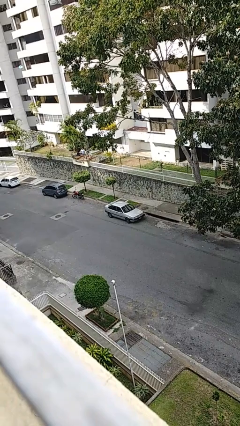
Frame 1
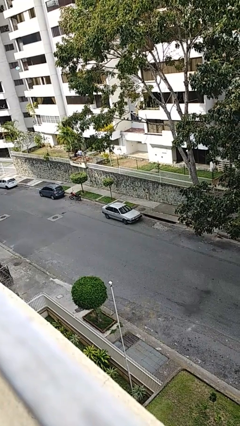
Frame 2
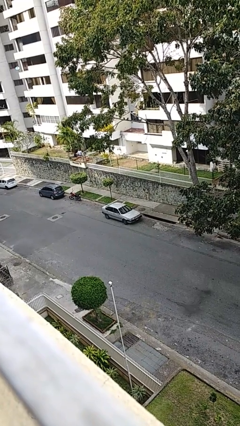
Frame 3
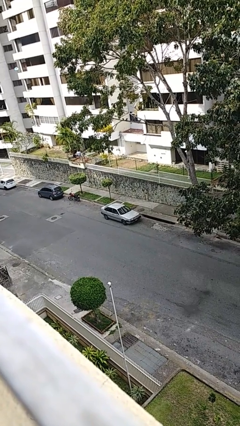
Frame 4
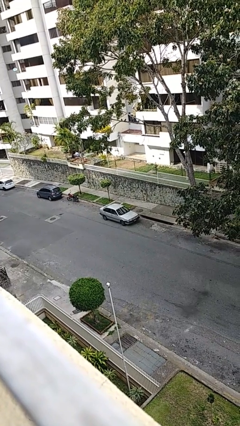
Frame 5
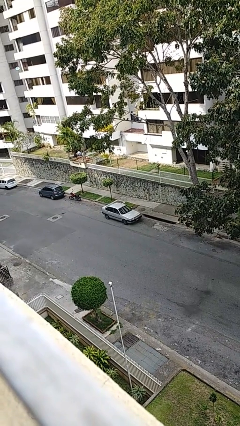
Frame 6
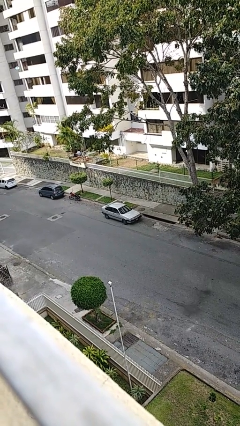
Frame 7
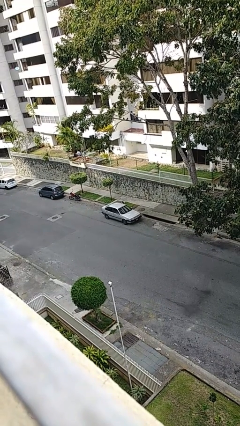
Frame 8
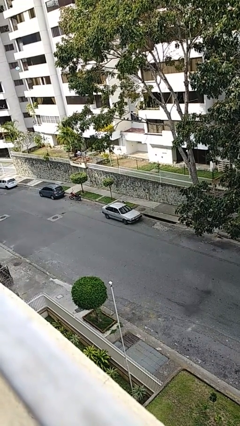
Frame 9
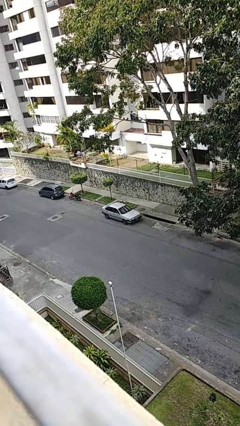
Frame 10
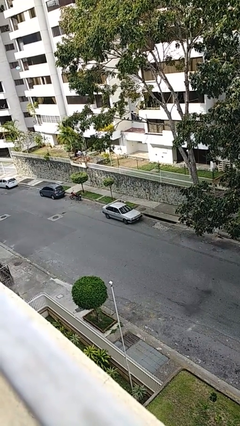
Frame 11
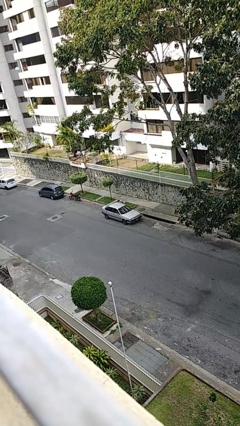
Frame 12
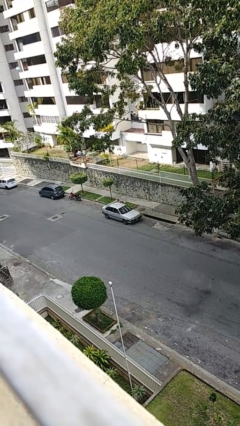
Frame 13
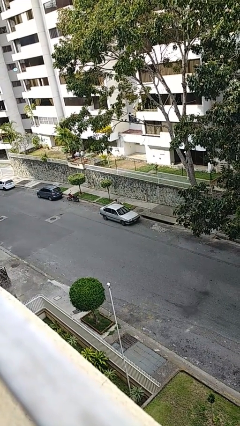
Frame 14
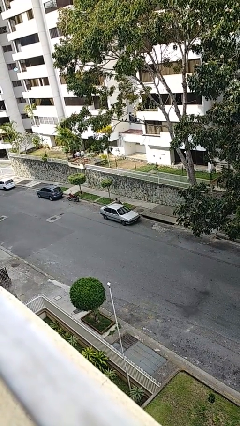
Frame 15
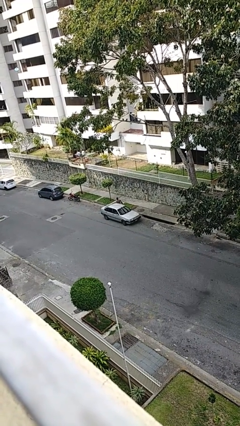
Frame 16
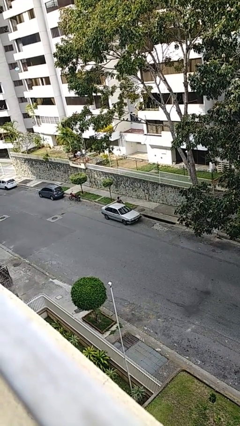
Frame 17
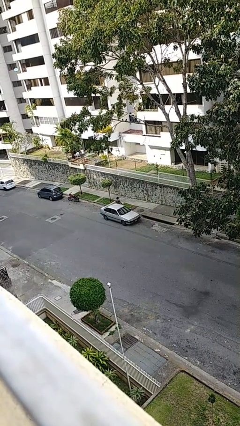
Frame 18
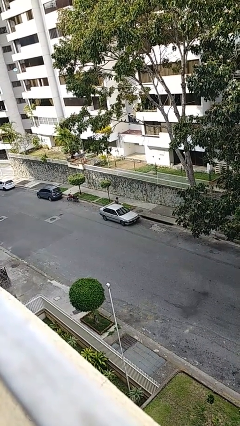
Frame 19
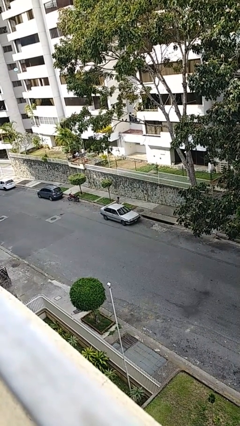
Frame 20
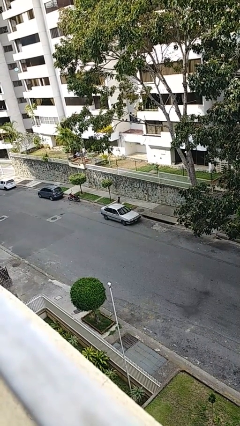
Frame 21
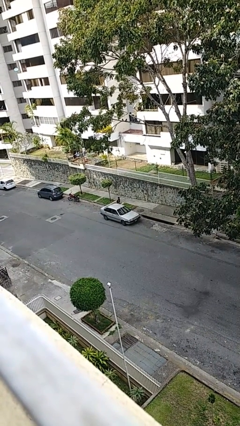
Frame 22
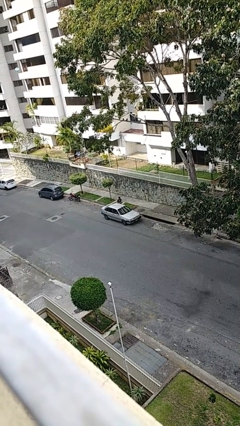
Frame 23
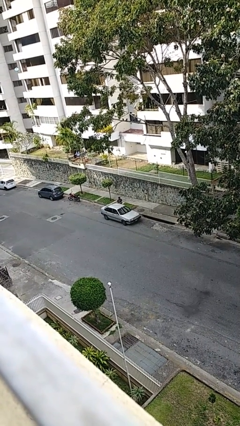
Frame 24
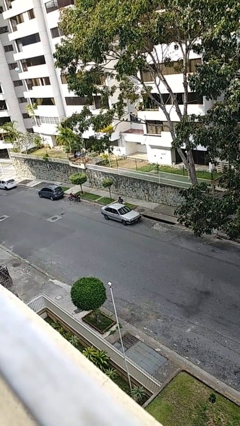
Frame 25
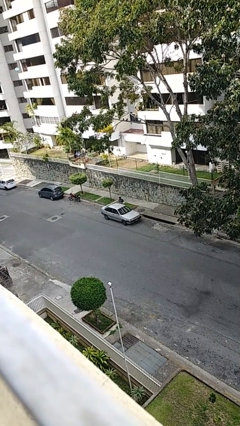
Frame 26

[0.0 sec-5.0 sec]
car drops off person

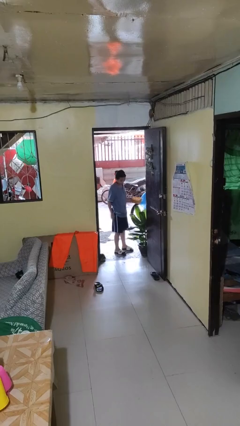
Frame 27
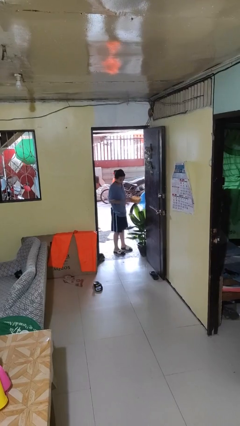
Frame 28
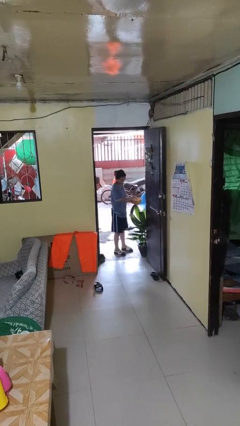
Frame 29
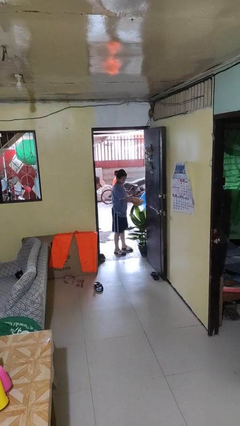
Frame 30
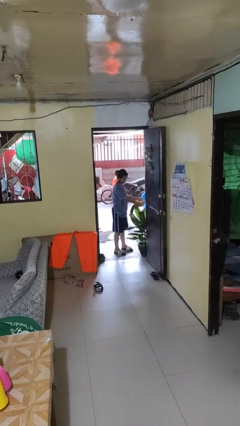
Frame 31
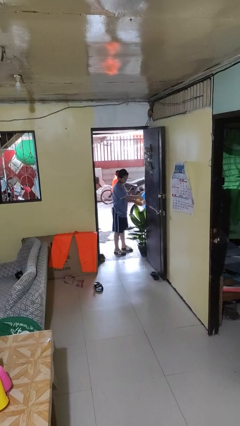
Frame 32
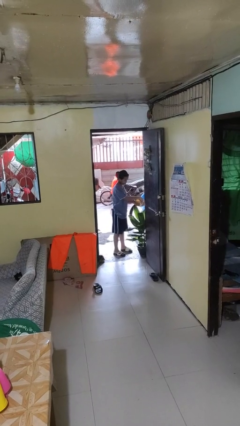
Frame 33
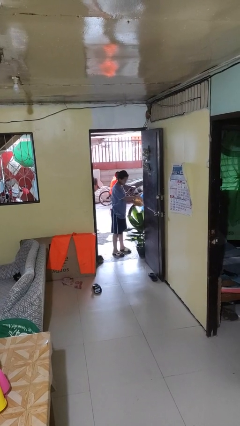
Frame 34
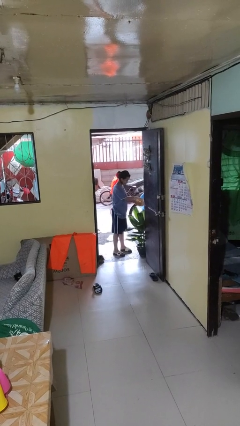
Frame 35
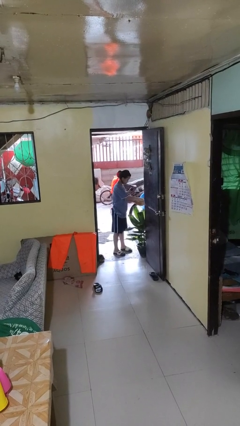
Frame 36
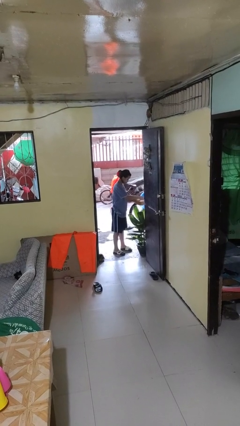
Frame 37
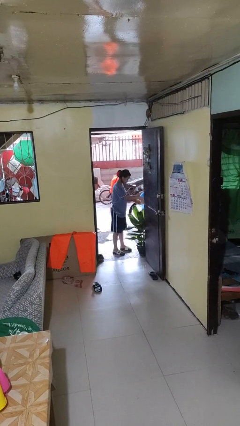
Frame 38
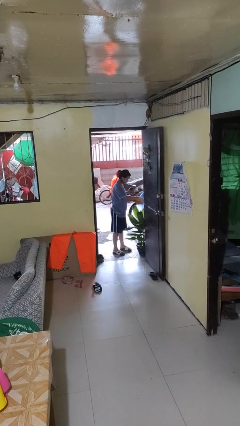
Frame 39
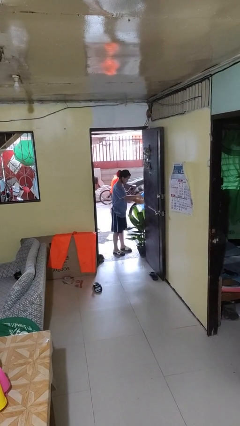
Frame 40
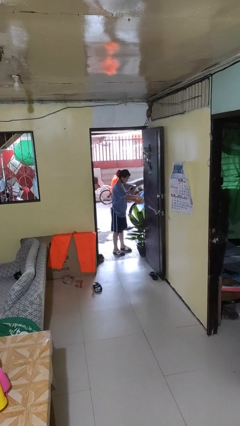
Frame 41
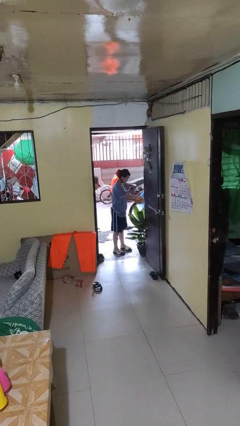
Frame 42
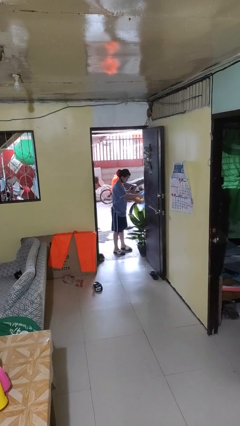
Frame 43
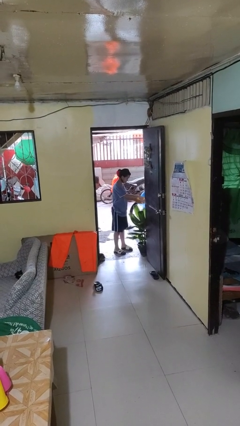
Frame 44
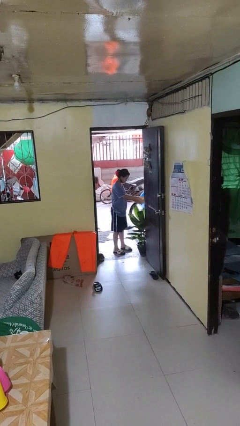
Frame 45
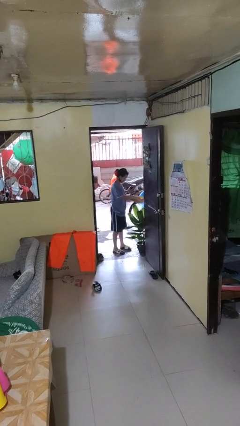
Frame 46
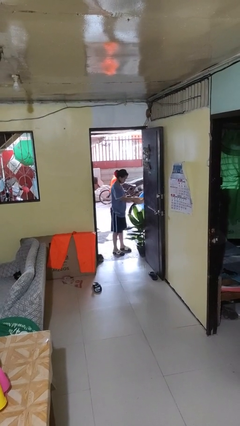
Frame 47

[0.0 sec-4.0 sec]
person waters houseplant

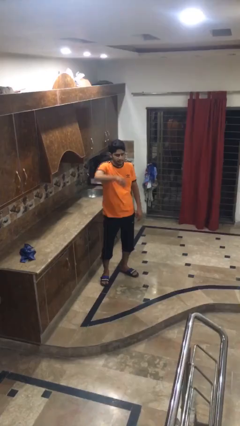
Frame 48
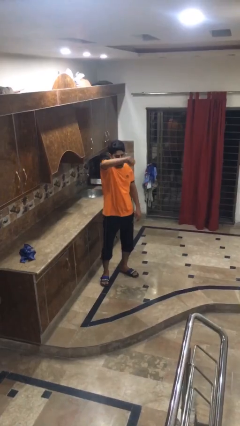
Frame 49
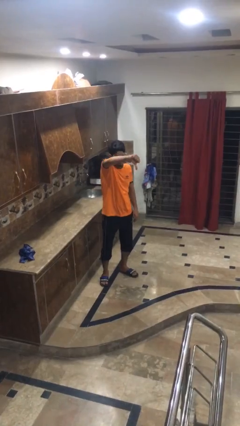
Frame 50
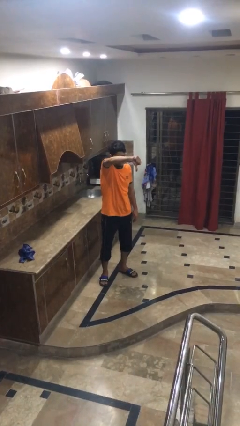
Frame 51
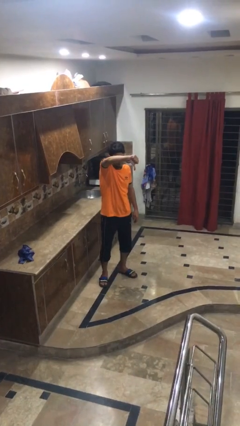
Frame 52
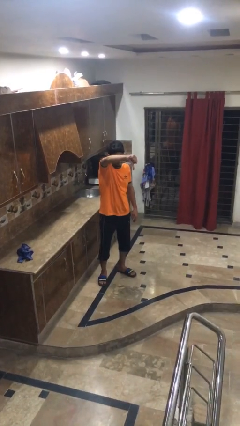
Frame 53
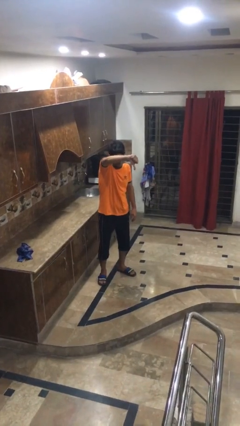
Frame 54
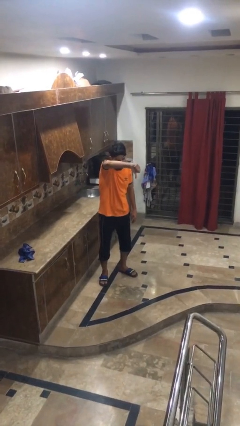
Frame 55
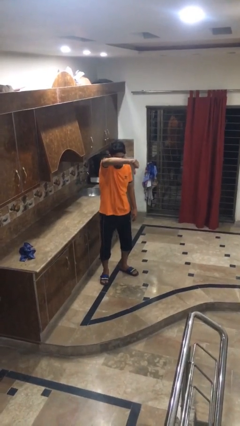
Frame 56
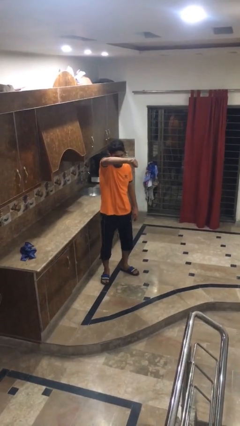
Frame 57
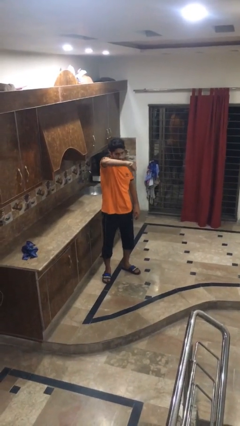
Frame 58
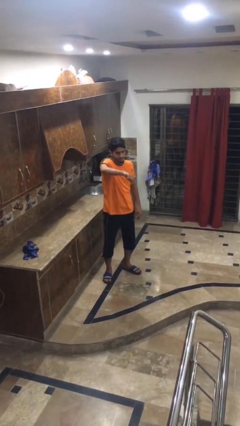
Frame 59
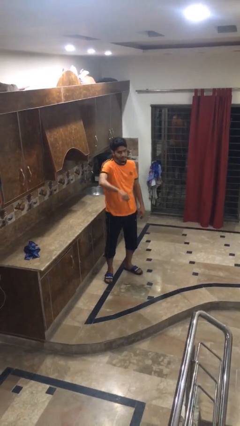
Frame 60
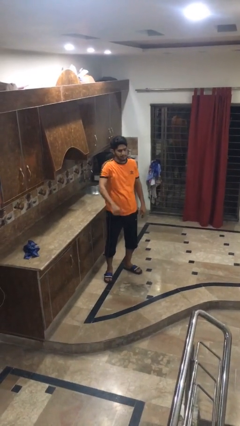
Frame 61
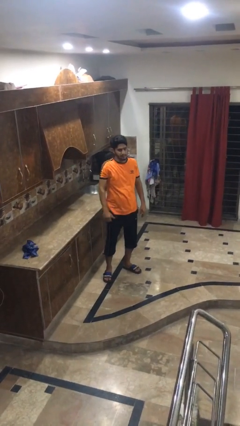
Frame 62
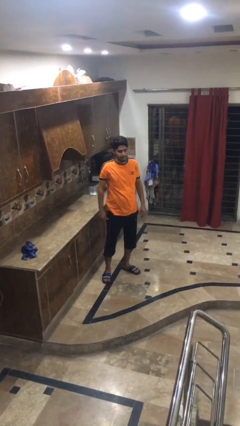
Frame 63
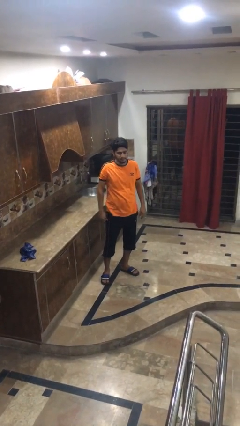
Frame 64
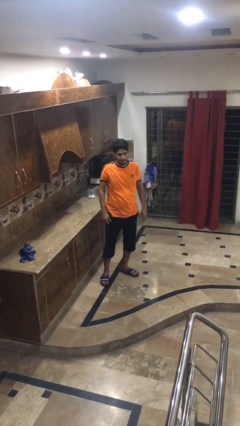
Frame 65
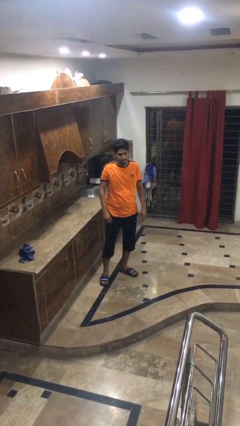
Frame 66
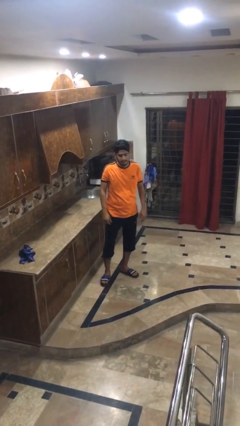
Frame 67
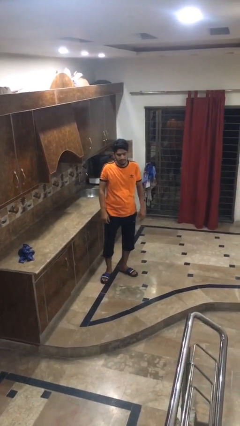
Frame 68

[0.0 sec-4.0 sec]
person gestures thumbs down

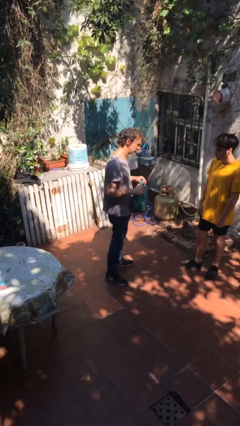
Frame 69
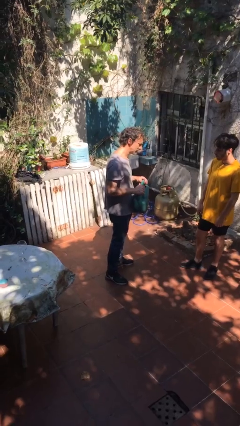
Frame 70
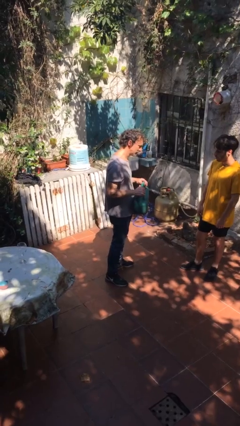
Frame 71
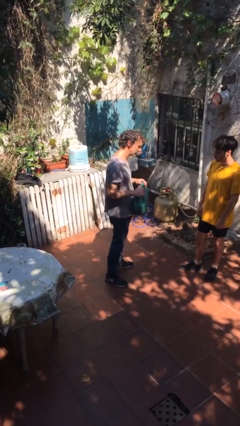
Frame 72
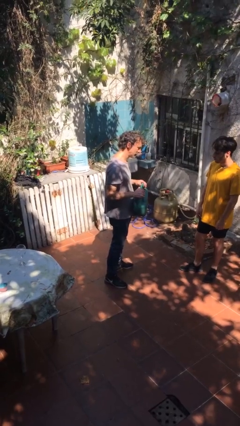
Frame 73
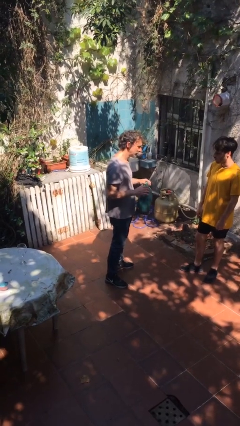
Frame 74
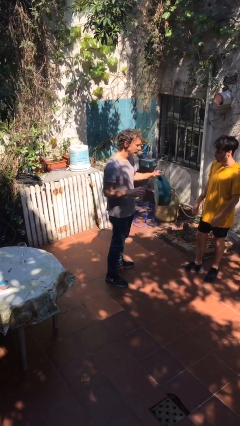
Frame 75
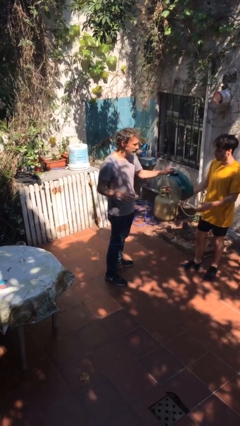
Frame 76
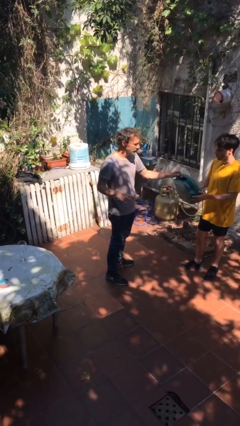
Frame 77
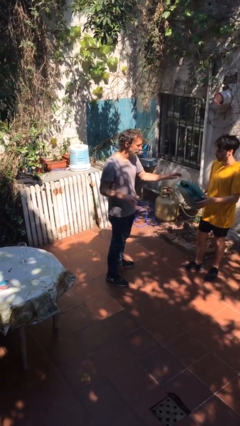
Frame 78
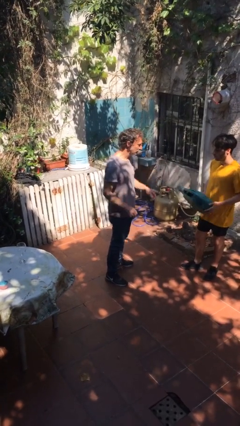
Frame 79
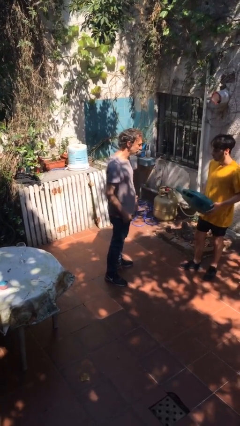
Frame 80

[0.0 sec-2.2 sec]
person transfers object to person

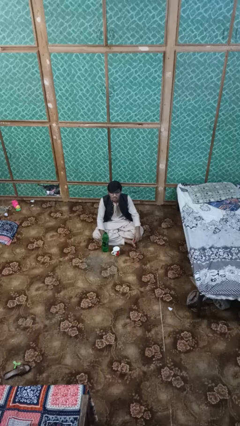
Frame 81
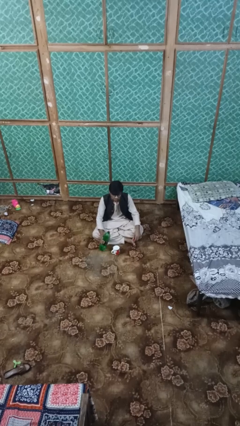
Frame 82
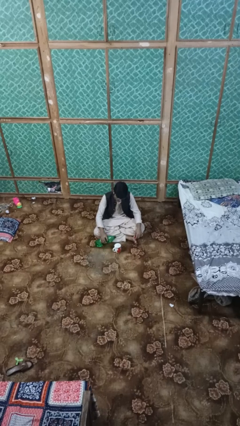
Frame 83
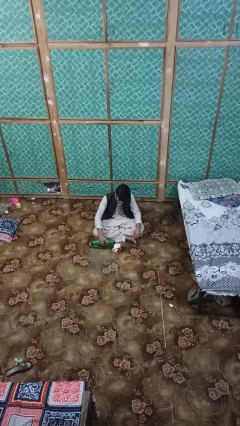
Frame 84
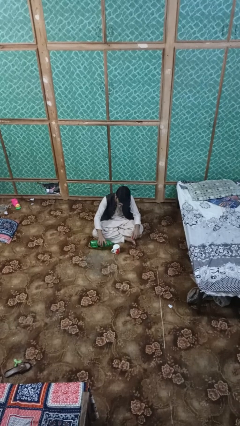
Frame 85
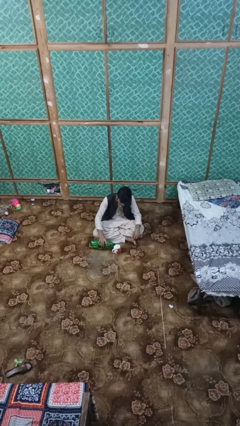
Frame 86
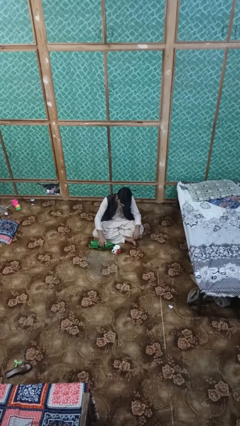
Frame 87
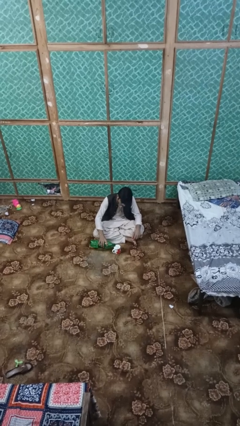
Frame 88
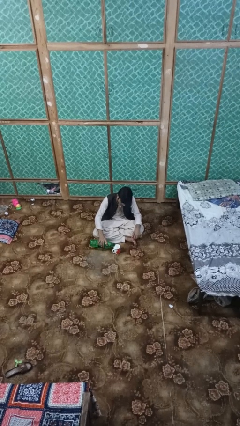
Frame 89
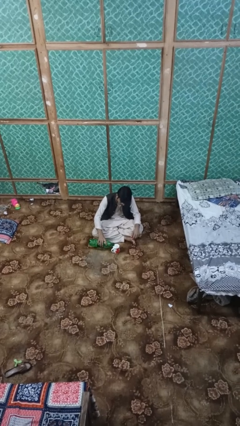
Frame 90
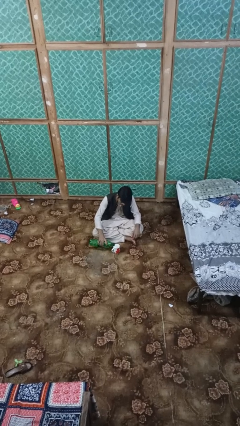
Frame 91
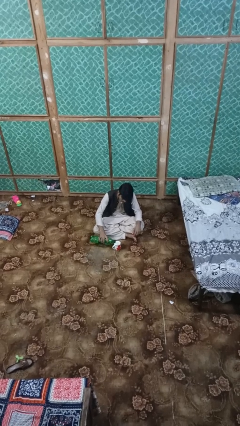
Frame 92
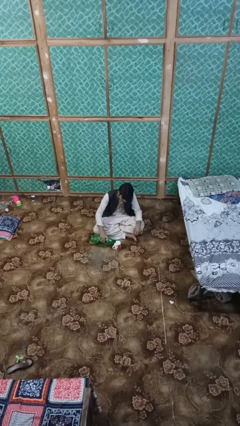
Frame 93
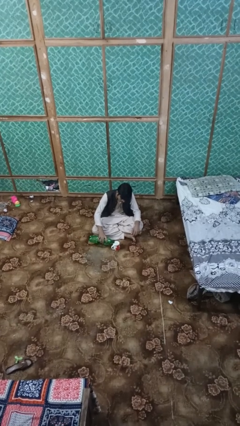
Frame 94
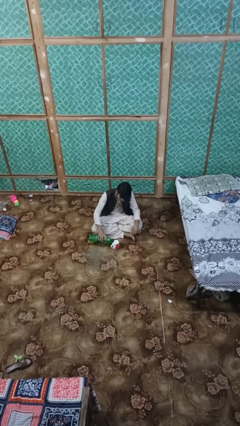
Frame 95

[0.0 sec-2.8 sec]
person pours liquid into cup

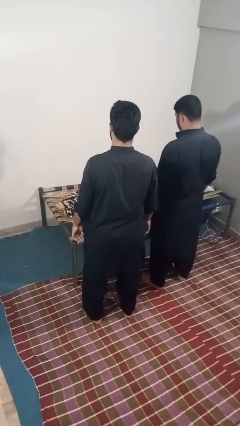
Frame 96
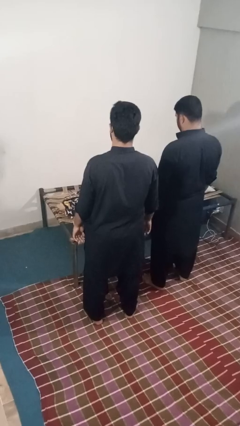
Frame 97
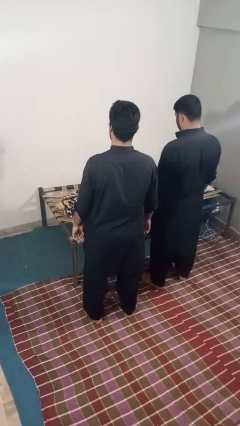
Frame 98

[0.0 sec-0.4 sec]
person nudges person with elbow
